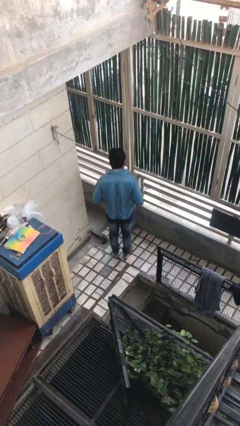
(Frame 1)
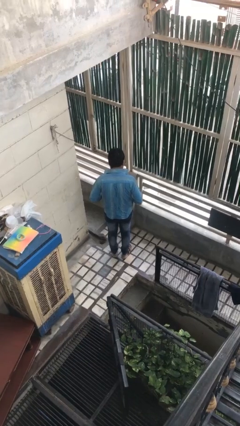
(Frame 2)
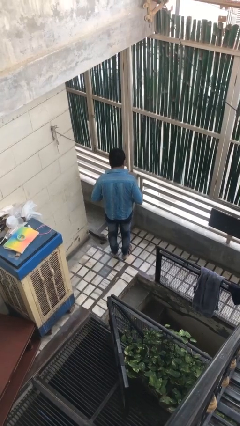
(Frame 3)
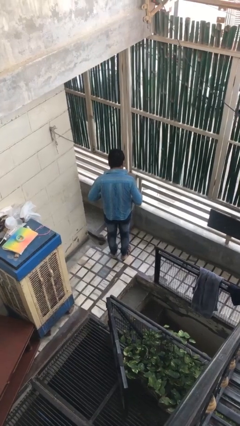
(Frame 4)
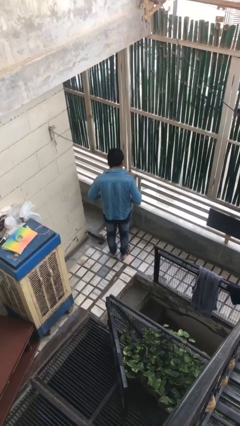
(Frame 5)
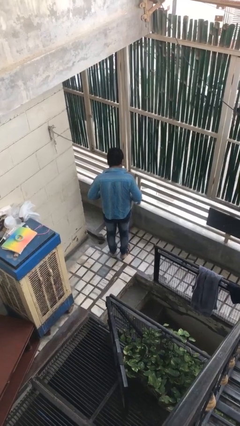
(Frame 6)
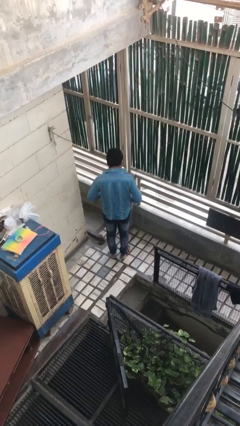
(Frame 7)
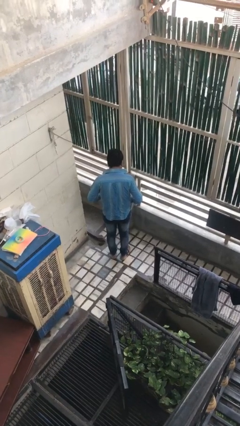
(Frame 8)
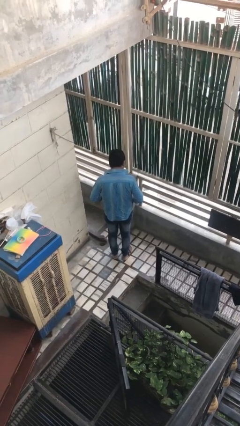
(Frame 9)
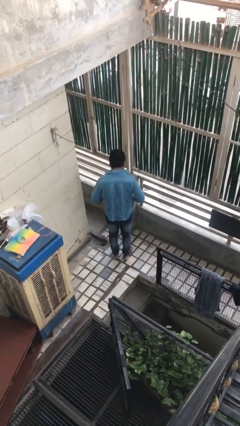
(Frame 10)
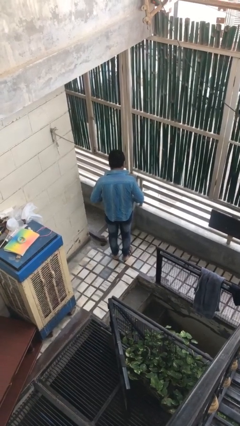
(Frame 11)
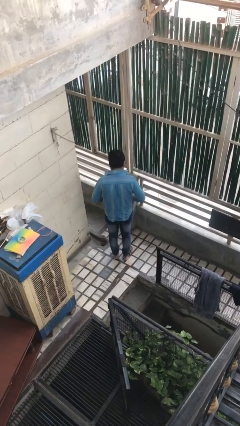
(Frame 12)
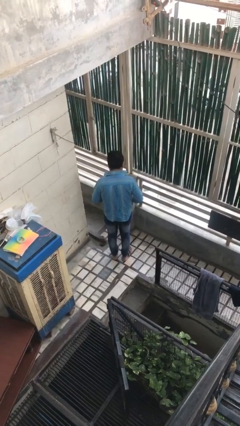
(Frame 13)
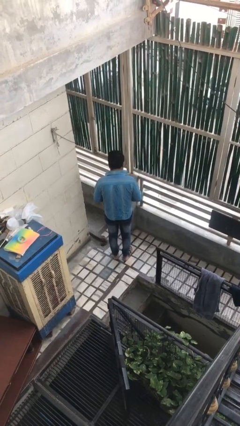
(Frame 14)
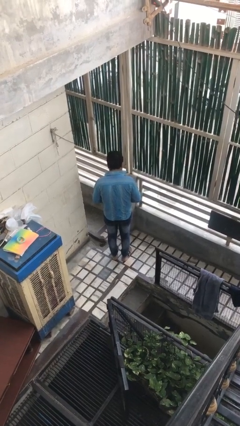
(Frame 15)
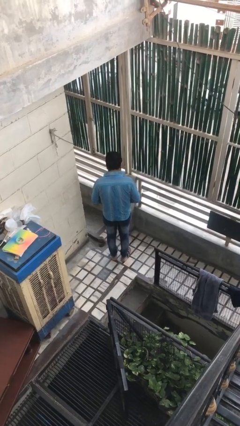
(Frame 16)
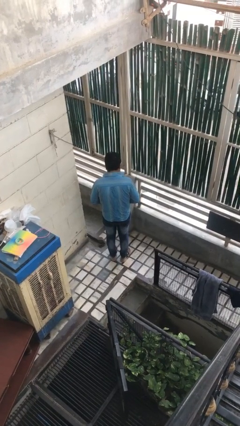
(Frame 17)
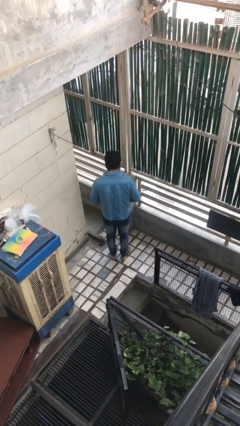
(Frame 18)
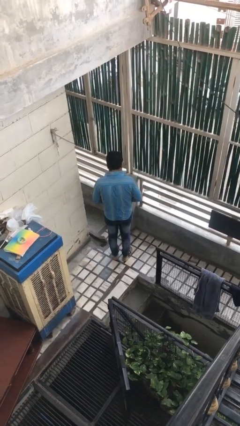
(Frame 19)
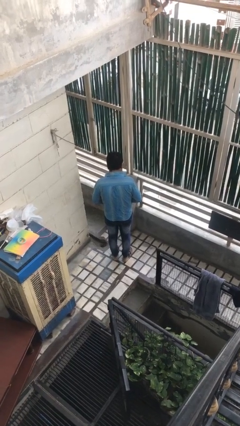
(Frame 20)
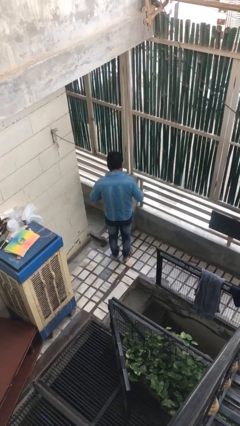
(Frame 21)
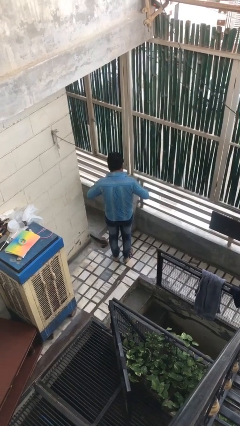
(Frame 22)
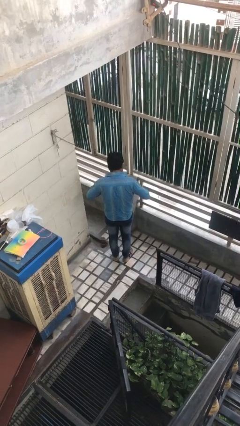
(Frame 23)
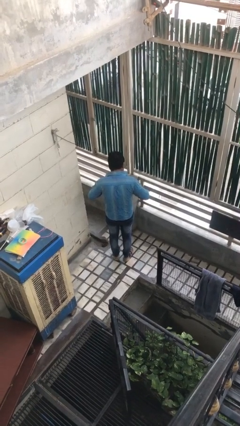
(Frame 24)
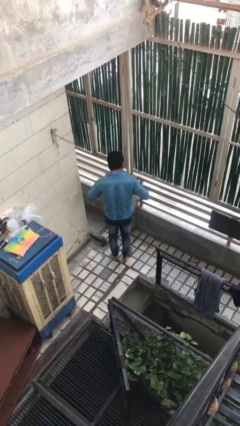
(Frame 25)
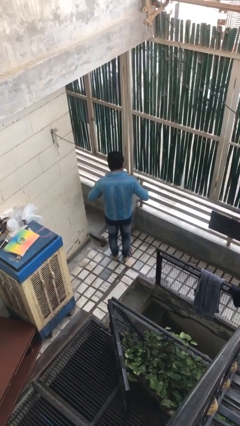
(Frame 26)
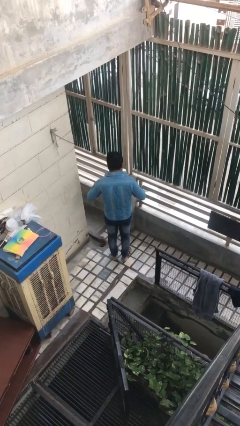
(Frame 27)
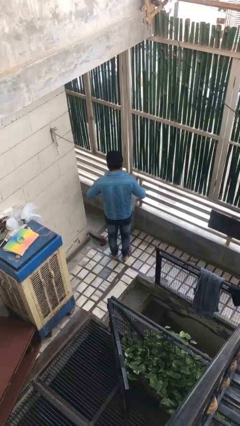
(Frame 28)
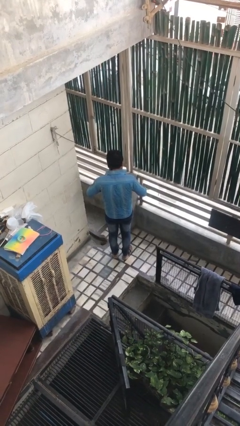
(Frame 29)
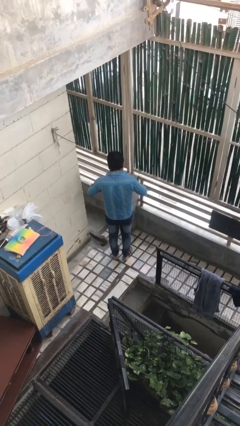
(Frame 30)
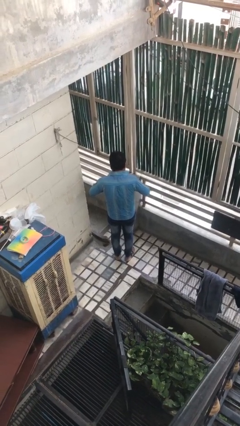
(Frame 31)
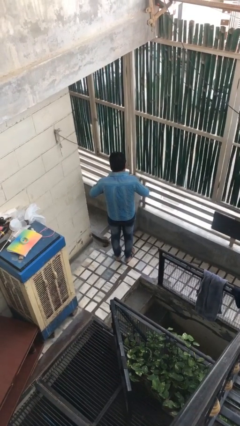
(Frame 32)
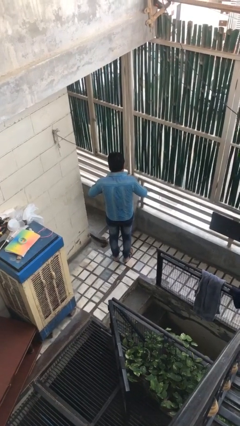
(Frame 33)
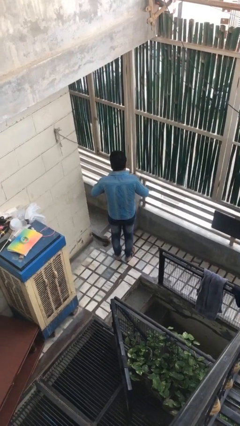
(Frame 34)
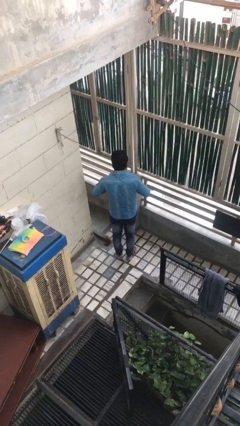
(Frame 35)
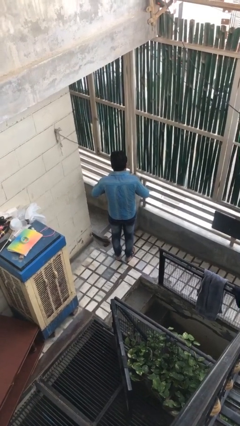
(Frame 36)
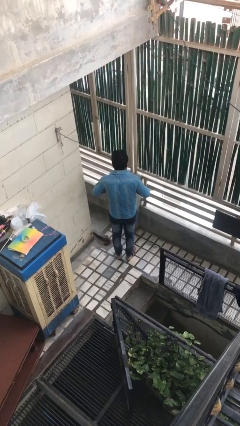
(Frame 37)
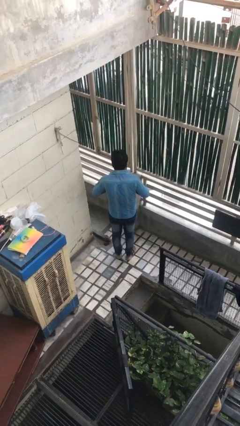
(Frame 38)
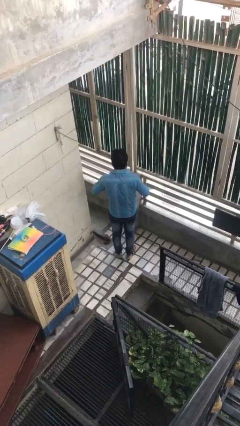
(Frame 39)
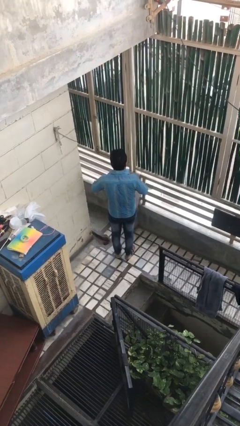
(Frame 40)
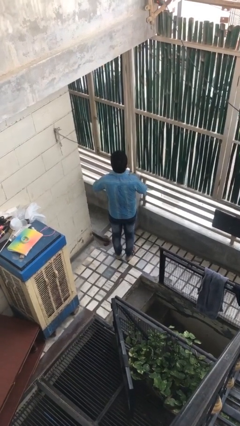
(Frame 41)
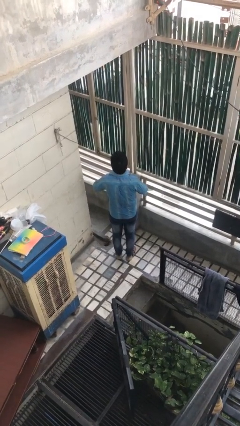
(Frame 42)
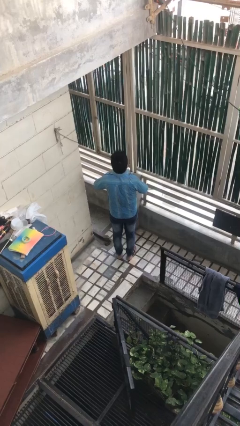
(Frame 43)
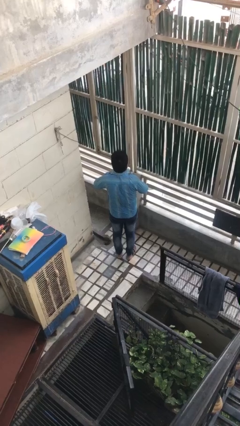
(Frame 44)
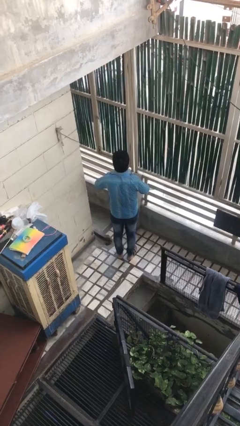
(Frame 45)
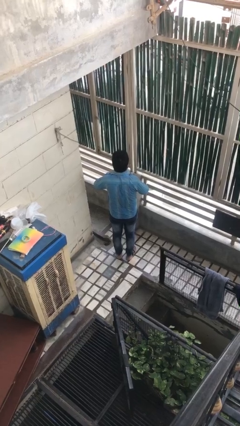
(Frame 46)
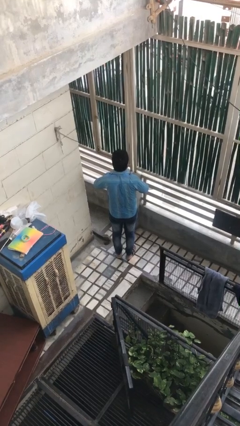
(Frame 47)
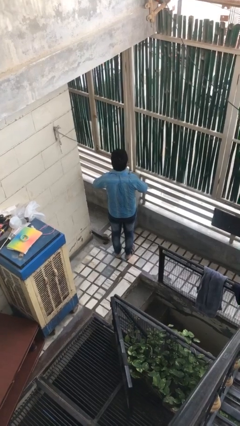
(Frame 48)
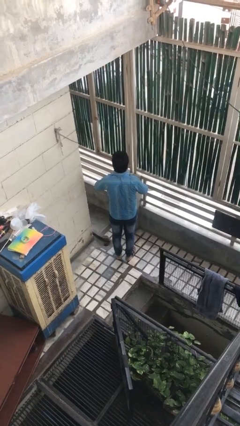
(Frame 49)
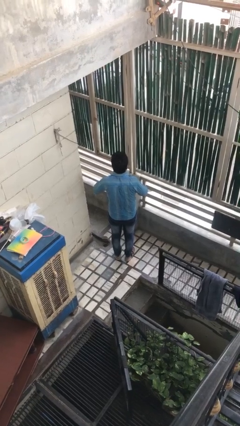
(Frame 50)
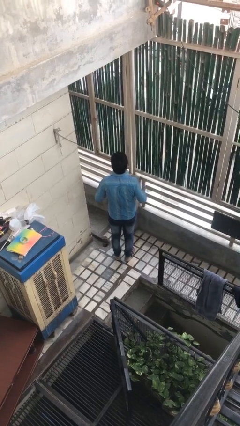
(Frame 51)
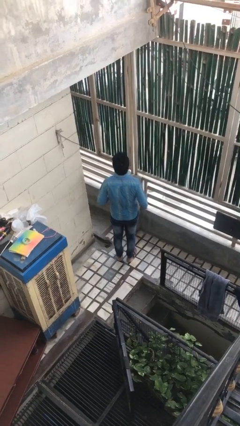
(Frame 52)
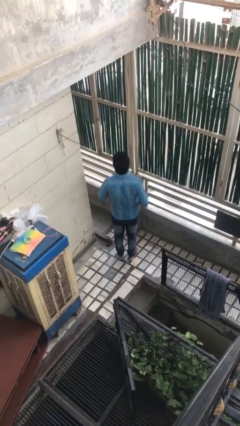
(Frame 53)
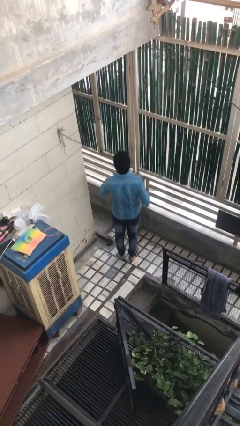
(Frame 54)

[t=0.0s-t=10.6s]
person buttons shirt

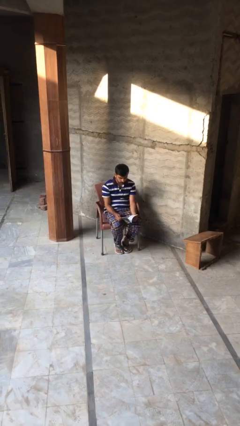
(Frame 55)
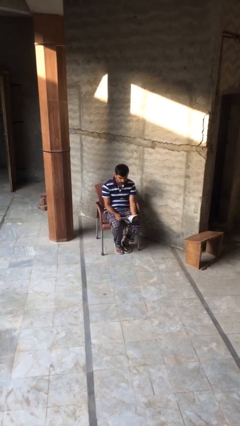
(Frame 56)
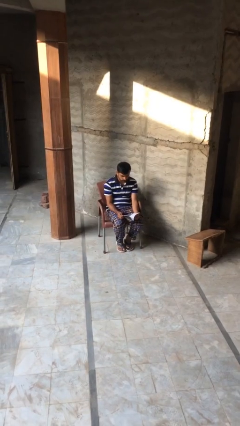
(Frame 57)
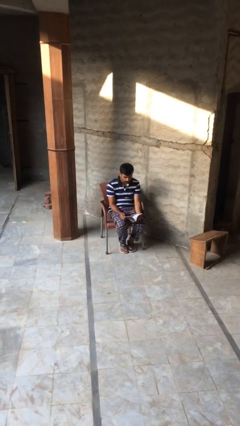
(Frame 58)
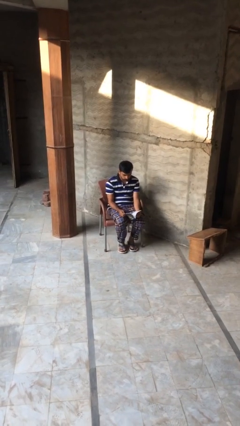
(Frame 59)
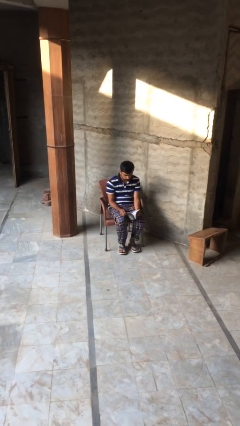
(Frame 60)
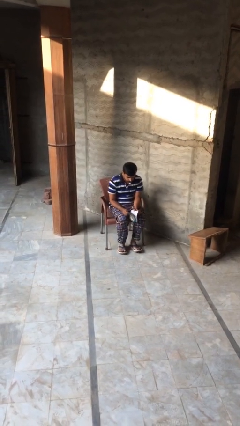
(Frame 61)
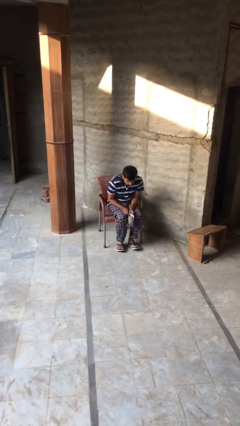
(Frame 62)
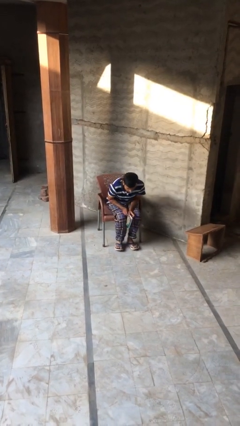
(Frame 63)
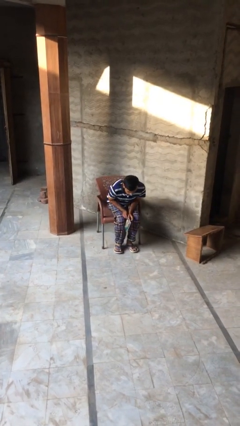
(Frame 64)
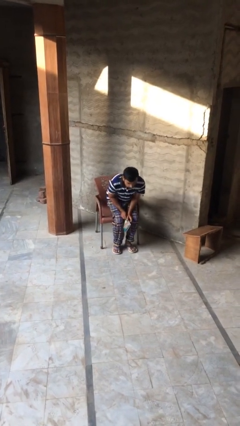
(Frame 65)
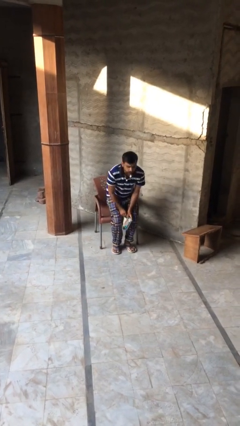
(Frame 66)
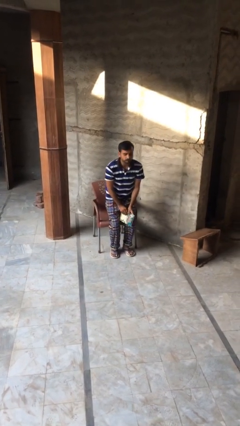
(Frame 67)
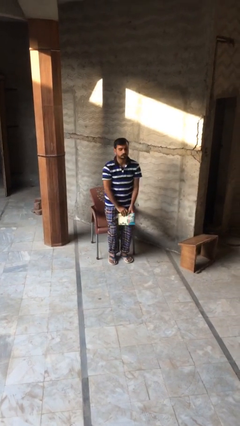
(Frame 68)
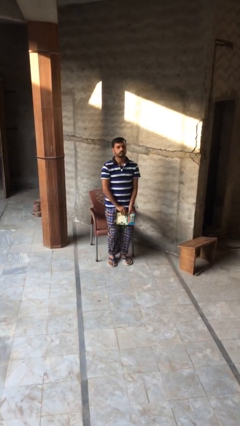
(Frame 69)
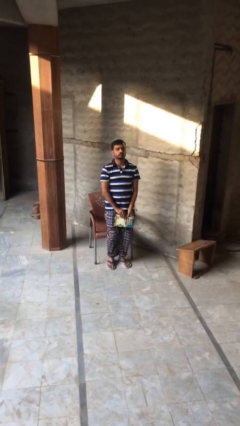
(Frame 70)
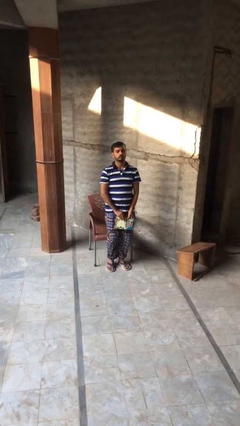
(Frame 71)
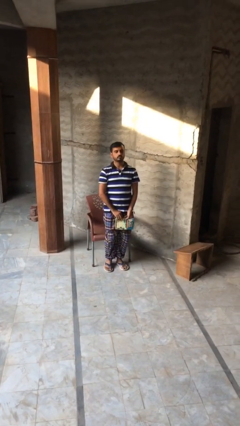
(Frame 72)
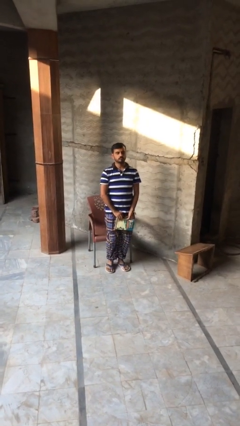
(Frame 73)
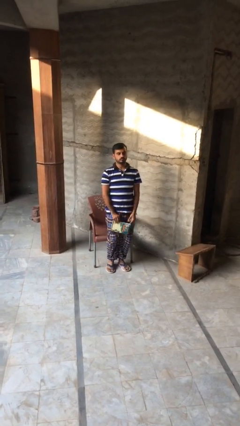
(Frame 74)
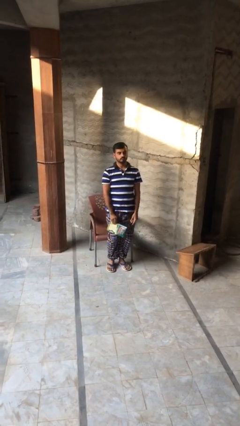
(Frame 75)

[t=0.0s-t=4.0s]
person stands up

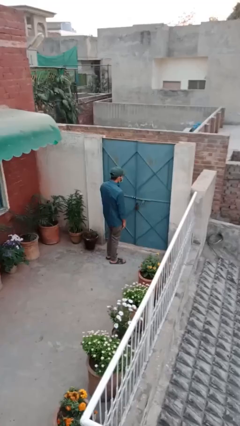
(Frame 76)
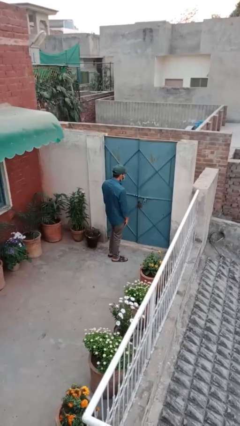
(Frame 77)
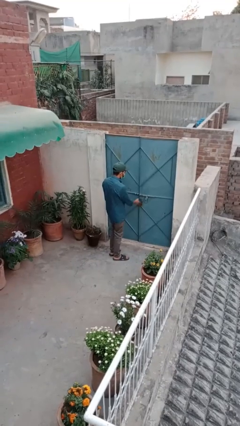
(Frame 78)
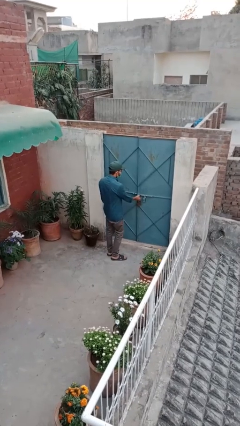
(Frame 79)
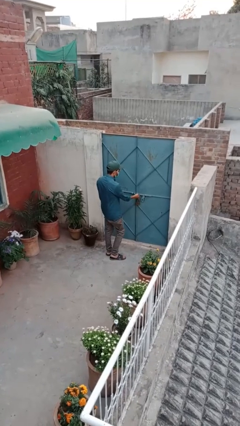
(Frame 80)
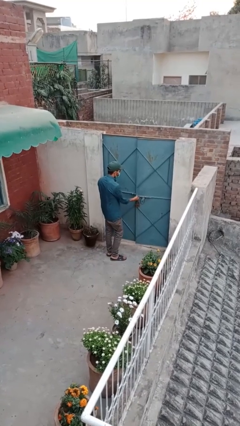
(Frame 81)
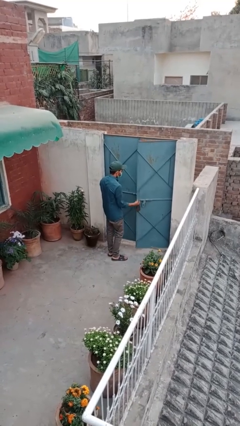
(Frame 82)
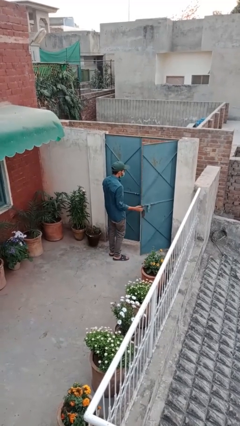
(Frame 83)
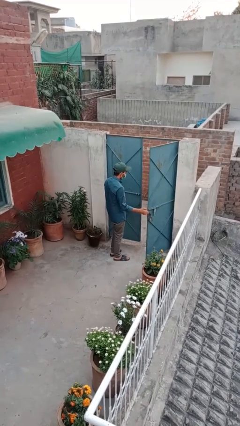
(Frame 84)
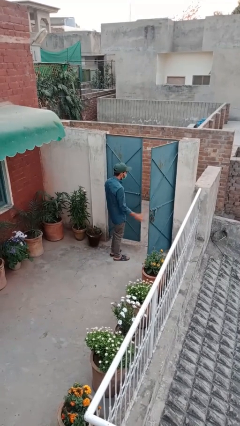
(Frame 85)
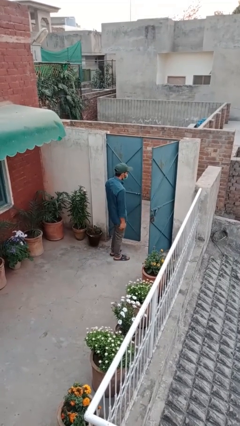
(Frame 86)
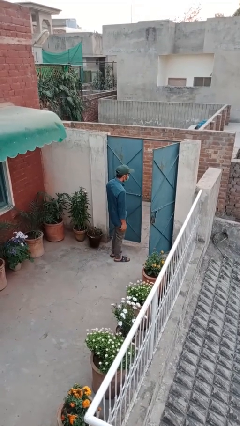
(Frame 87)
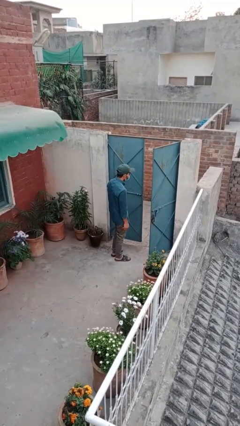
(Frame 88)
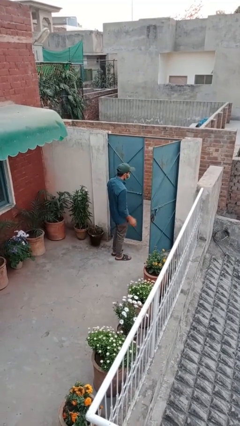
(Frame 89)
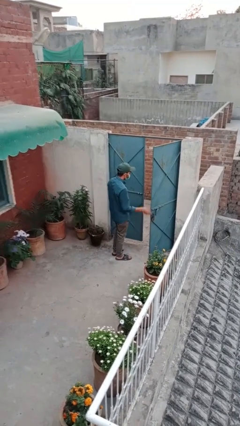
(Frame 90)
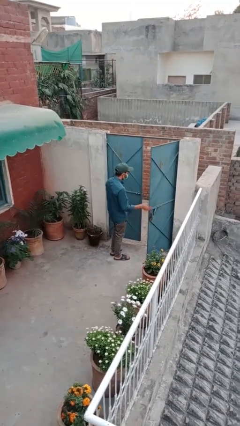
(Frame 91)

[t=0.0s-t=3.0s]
person opens facility door

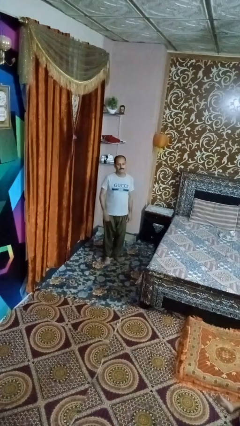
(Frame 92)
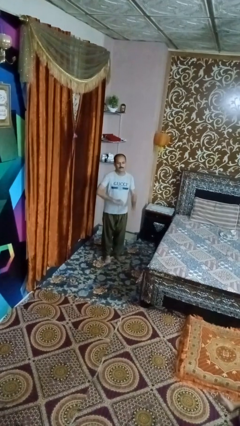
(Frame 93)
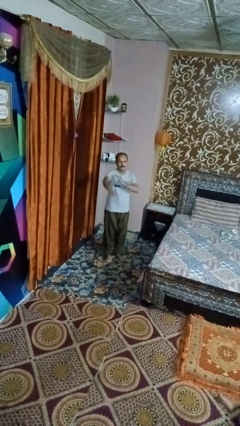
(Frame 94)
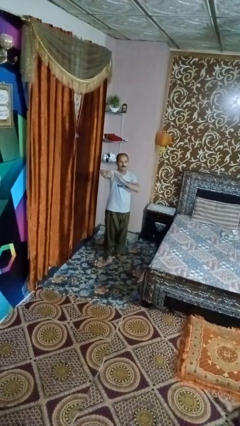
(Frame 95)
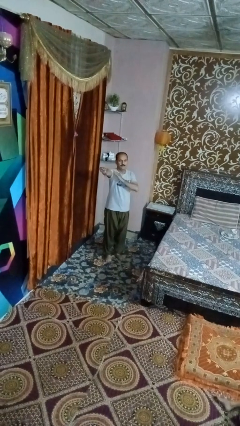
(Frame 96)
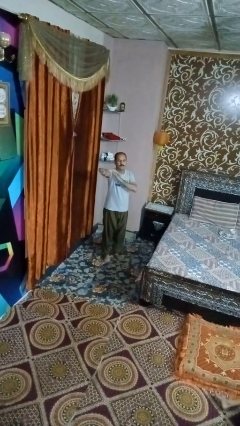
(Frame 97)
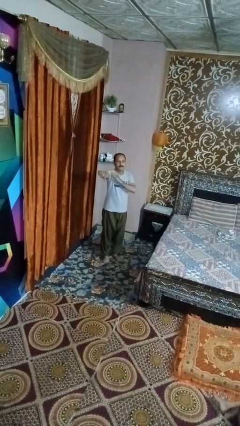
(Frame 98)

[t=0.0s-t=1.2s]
person karate chop
